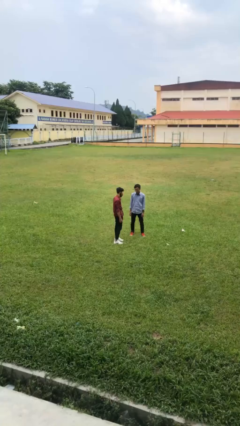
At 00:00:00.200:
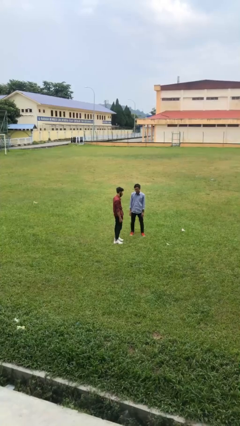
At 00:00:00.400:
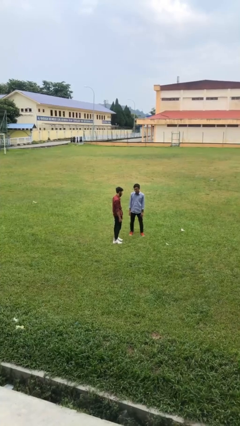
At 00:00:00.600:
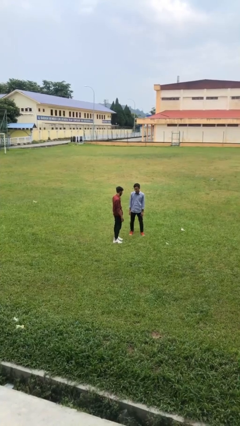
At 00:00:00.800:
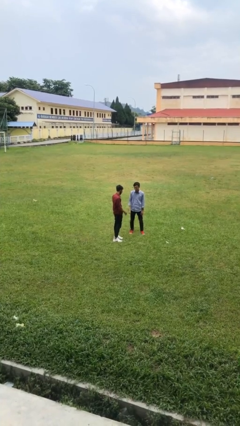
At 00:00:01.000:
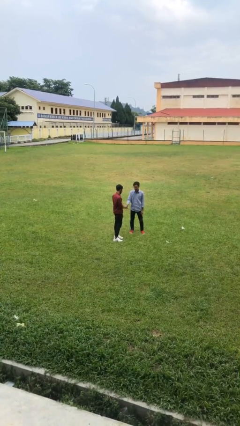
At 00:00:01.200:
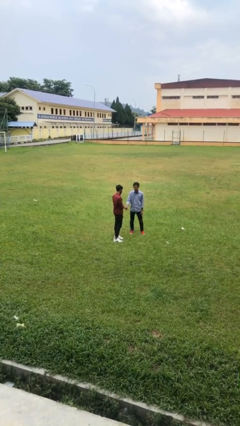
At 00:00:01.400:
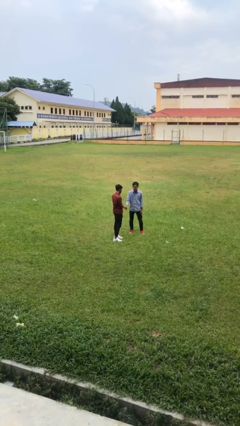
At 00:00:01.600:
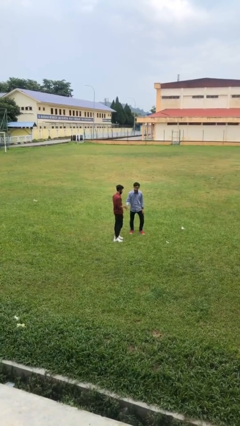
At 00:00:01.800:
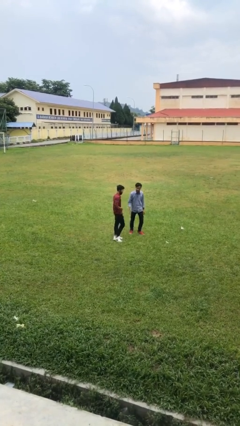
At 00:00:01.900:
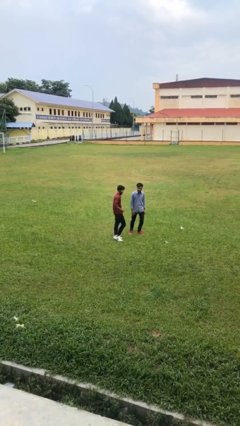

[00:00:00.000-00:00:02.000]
person shakes hand

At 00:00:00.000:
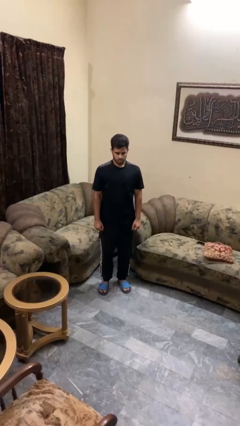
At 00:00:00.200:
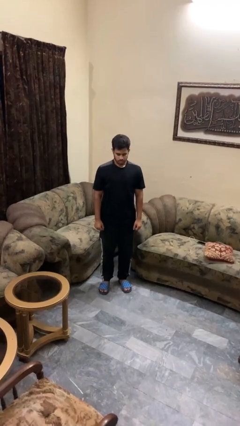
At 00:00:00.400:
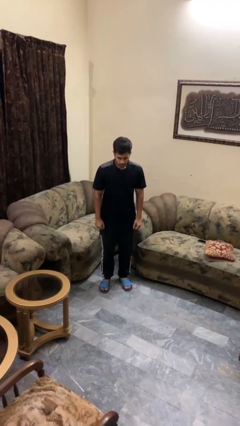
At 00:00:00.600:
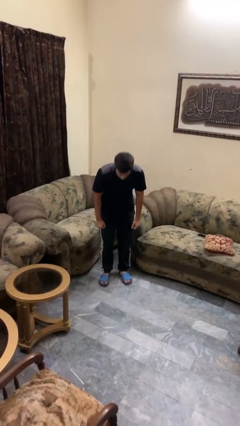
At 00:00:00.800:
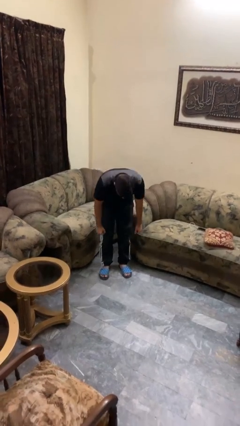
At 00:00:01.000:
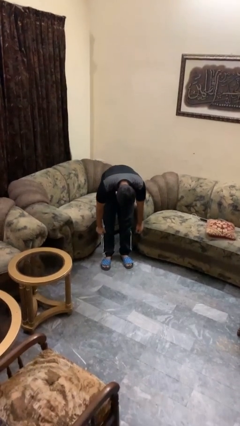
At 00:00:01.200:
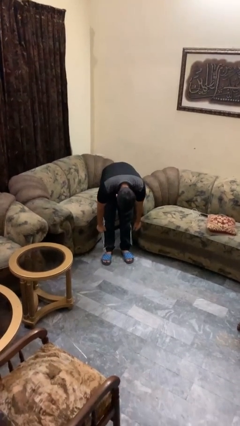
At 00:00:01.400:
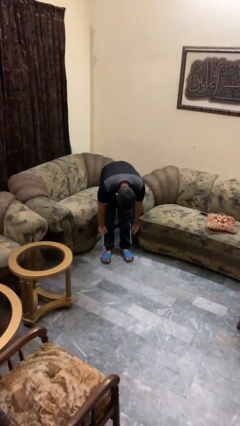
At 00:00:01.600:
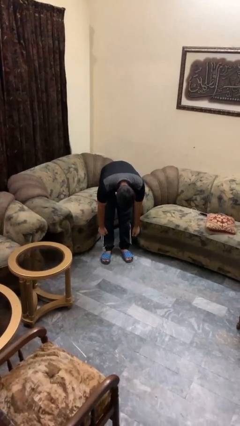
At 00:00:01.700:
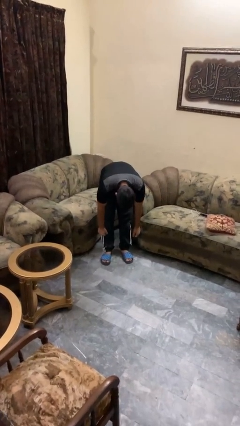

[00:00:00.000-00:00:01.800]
person bows

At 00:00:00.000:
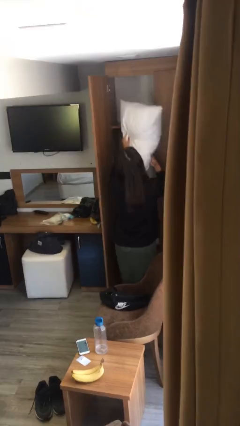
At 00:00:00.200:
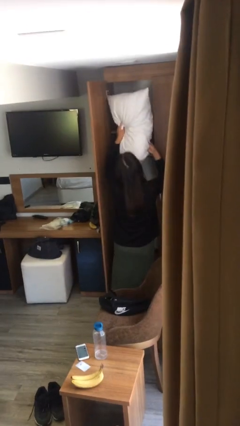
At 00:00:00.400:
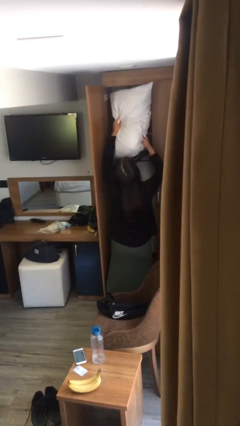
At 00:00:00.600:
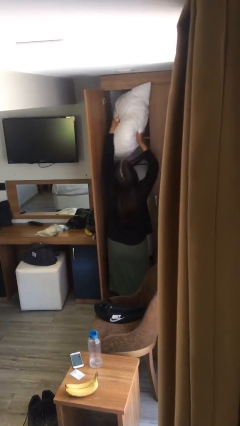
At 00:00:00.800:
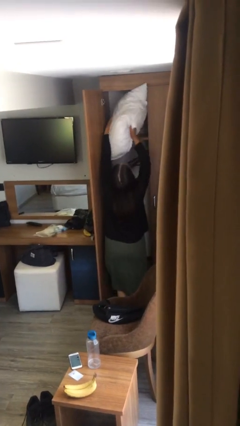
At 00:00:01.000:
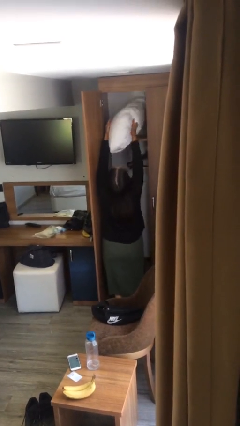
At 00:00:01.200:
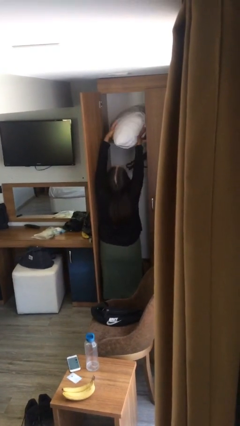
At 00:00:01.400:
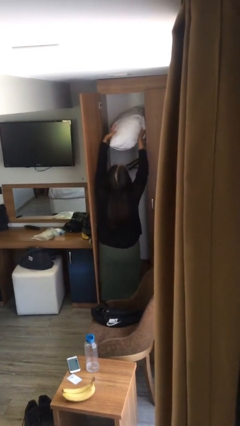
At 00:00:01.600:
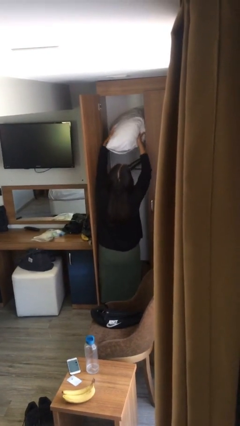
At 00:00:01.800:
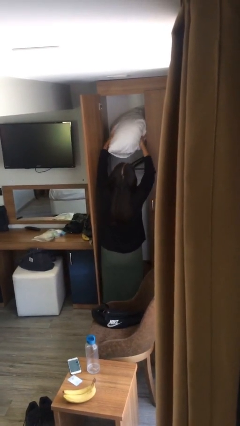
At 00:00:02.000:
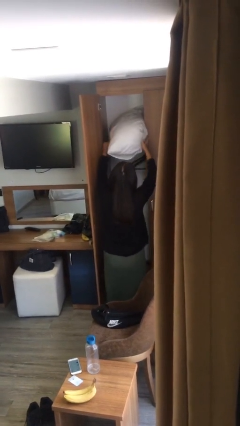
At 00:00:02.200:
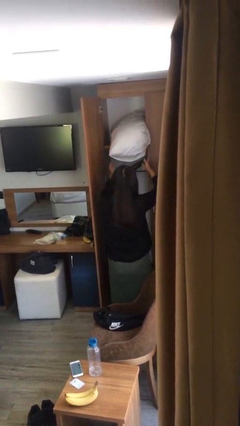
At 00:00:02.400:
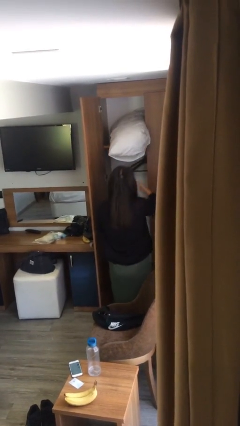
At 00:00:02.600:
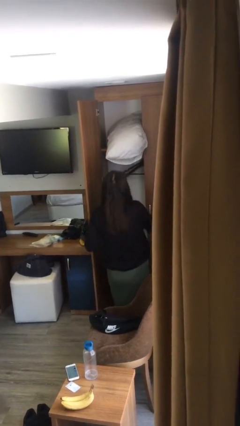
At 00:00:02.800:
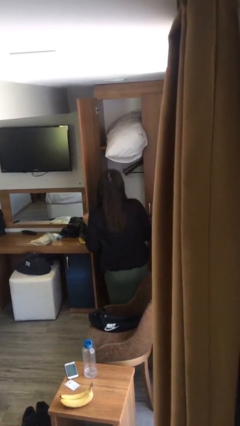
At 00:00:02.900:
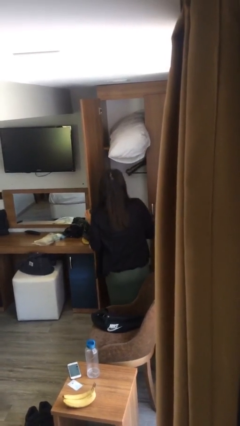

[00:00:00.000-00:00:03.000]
person puts down object on shelf

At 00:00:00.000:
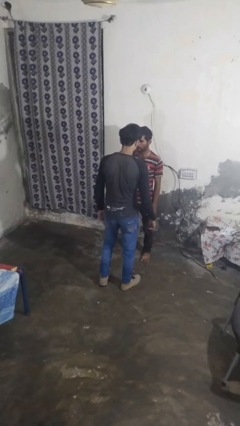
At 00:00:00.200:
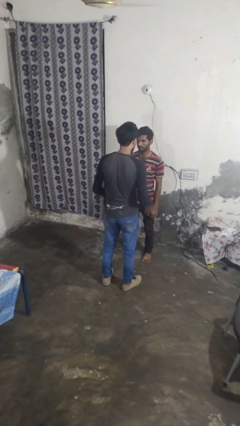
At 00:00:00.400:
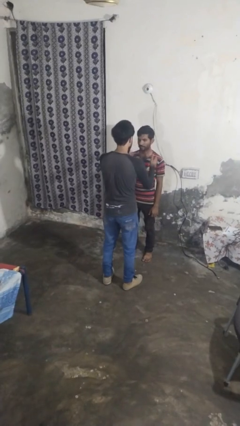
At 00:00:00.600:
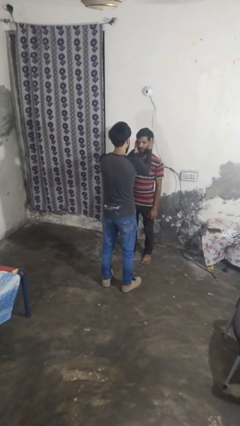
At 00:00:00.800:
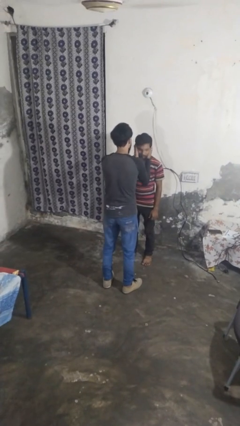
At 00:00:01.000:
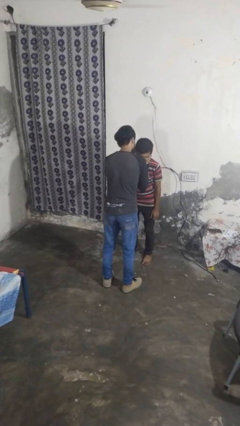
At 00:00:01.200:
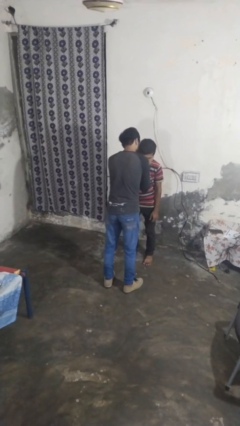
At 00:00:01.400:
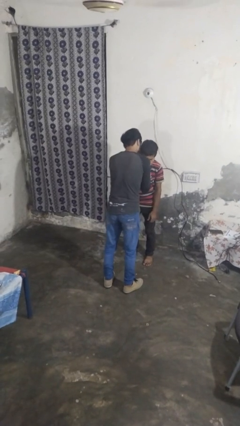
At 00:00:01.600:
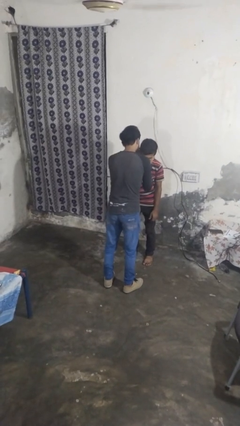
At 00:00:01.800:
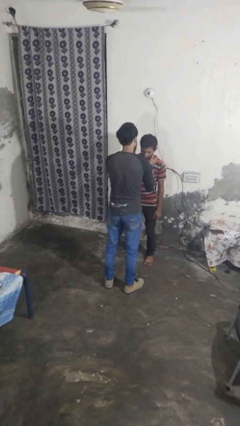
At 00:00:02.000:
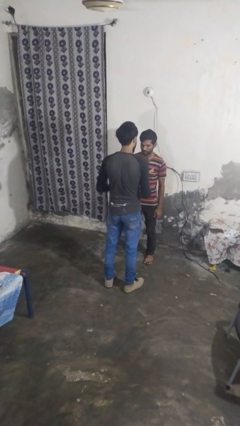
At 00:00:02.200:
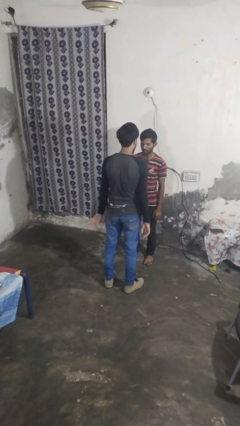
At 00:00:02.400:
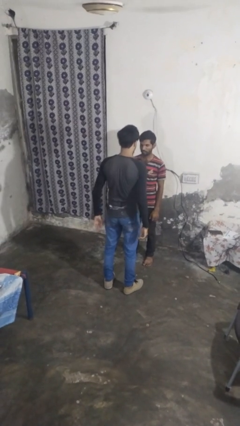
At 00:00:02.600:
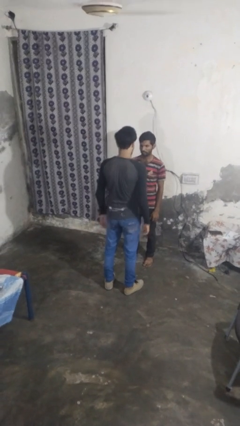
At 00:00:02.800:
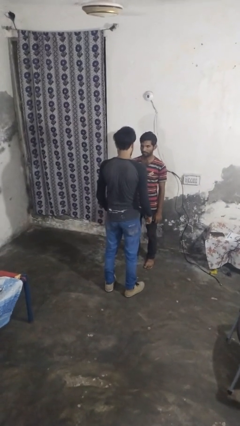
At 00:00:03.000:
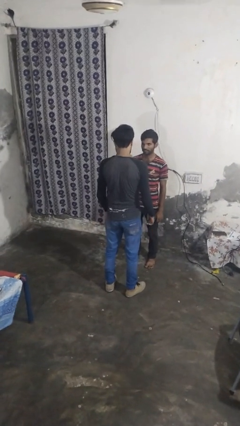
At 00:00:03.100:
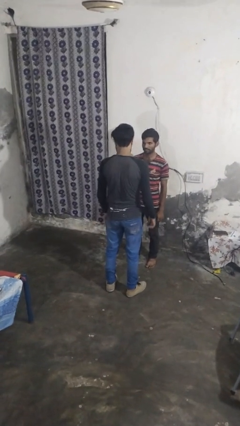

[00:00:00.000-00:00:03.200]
person kisses cheek of person

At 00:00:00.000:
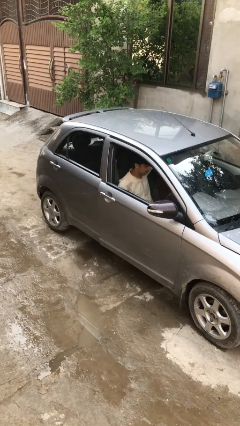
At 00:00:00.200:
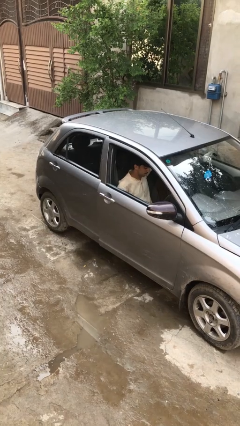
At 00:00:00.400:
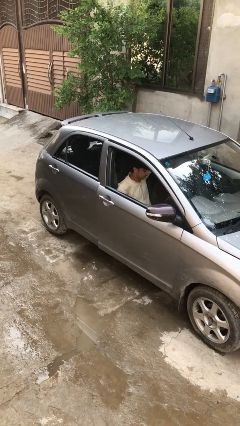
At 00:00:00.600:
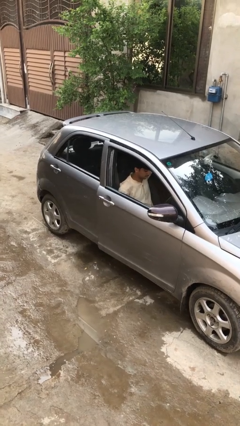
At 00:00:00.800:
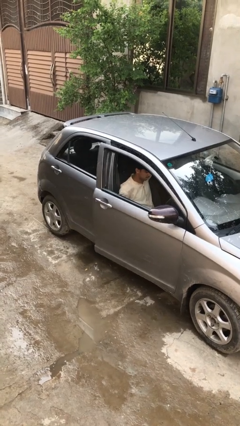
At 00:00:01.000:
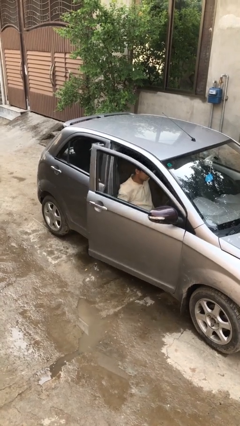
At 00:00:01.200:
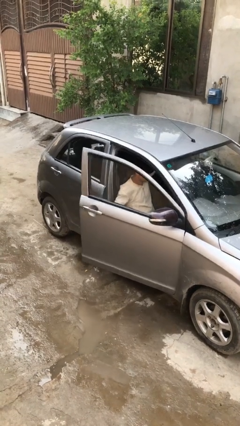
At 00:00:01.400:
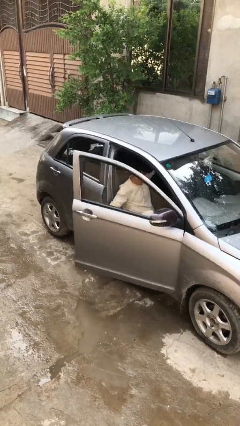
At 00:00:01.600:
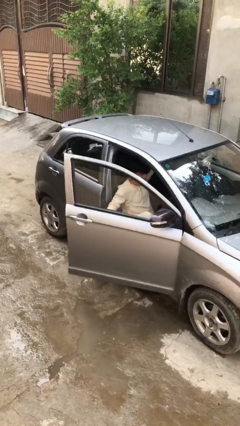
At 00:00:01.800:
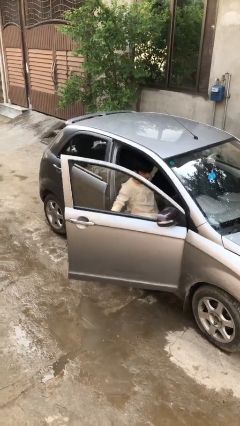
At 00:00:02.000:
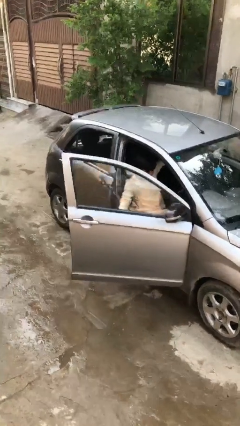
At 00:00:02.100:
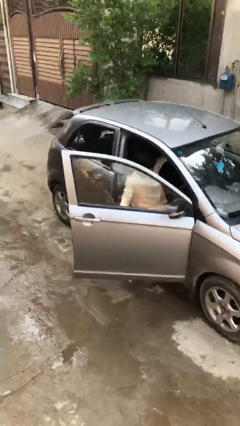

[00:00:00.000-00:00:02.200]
person opens car door

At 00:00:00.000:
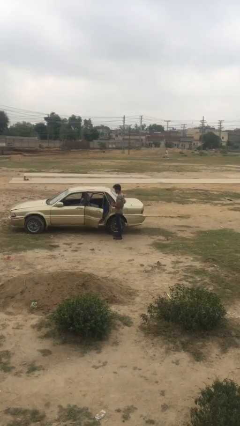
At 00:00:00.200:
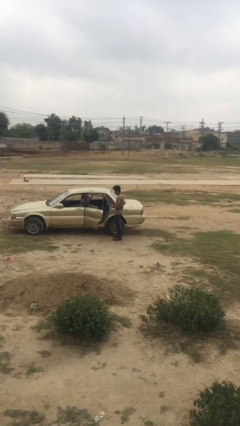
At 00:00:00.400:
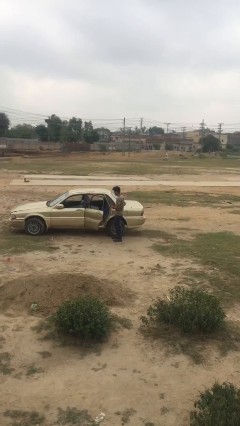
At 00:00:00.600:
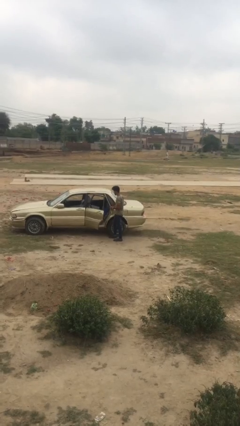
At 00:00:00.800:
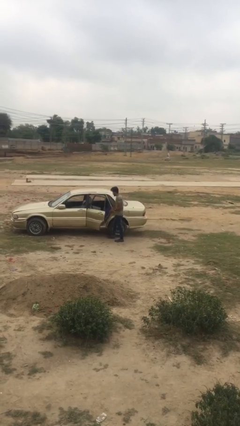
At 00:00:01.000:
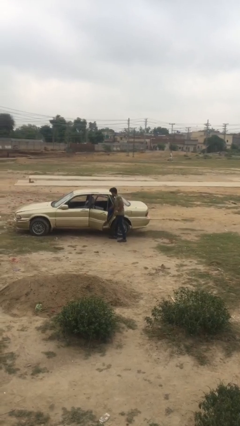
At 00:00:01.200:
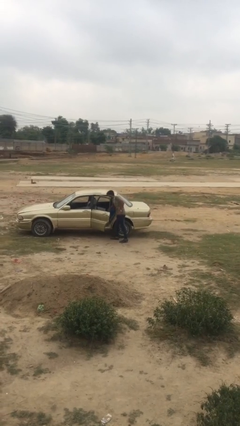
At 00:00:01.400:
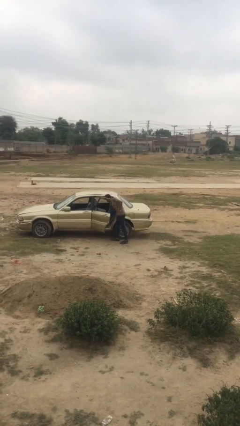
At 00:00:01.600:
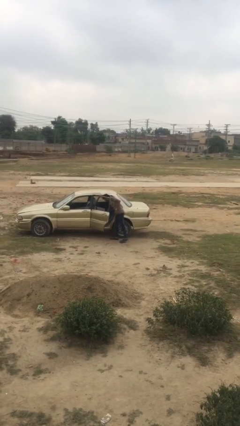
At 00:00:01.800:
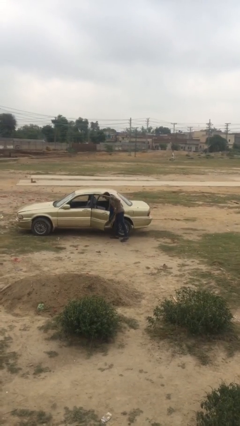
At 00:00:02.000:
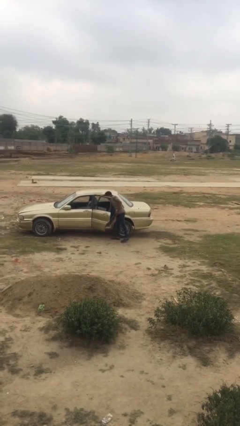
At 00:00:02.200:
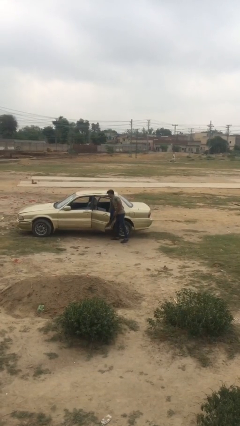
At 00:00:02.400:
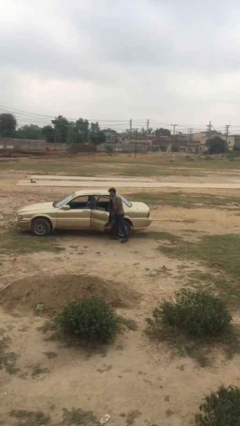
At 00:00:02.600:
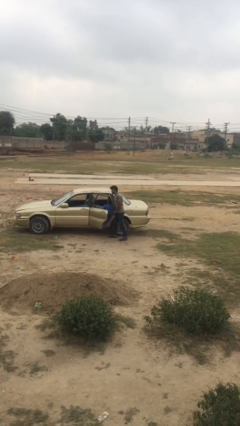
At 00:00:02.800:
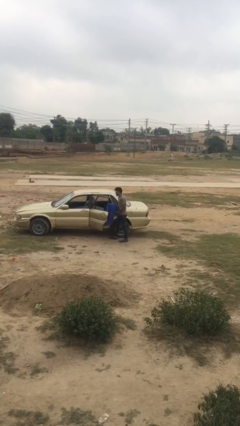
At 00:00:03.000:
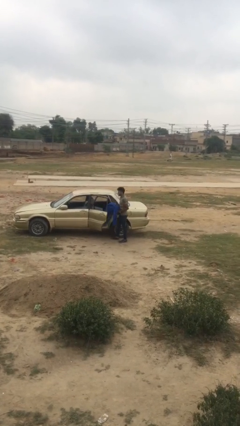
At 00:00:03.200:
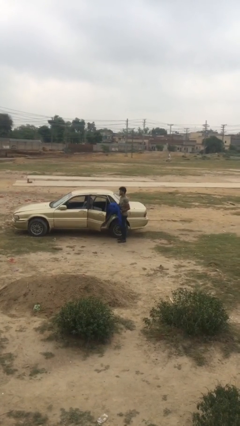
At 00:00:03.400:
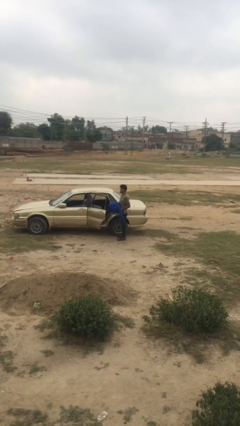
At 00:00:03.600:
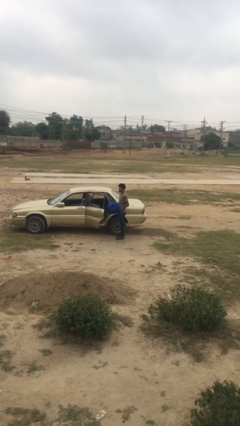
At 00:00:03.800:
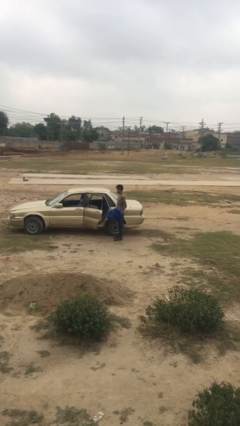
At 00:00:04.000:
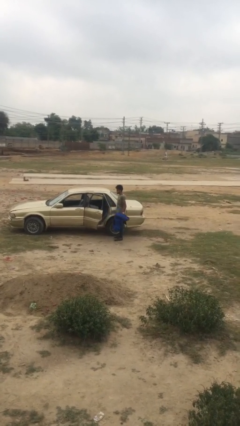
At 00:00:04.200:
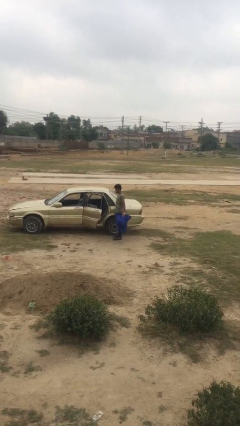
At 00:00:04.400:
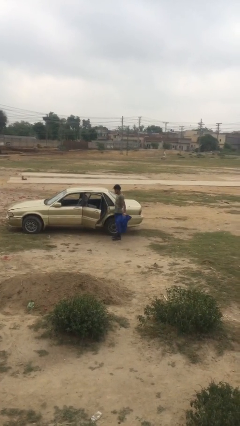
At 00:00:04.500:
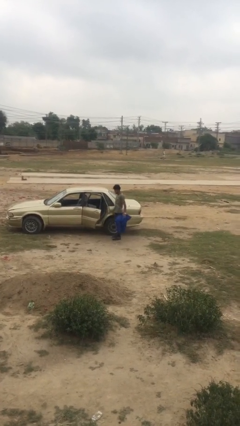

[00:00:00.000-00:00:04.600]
person unloads car
